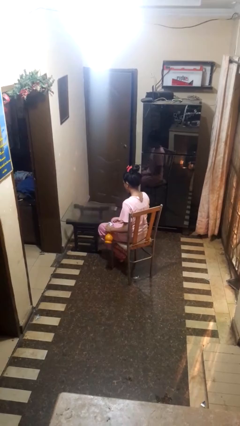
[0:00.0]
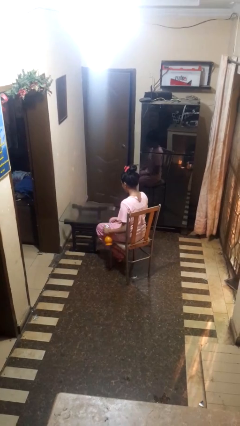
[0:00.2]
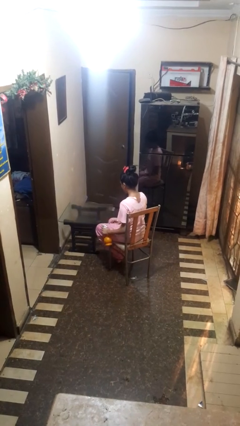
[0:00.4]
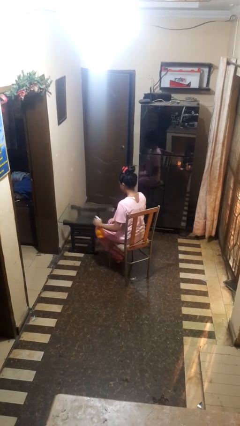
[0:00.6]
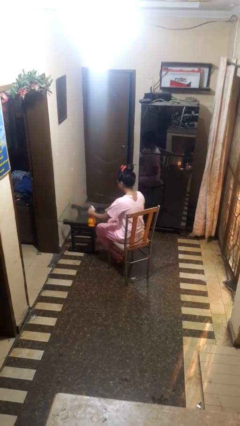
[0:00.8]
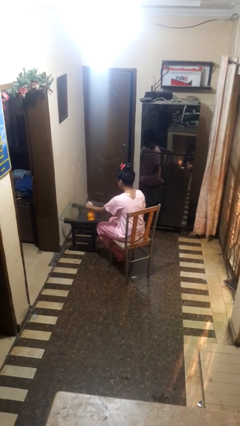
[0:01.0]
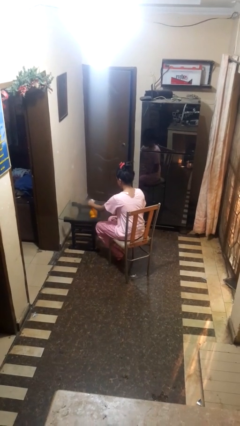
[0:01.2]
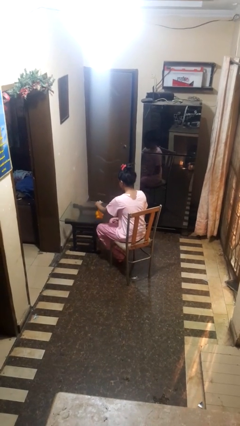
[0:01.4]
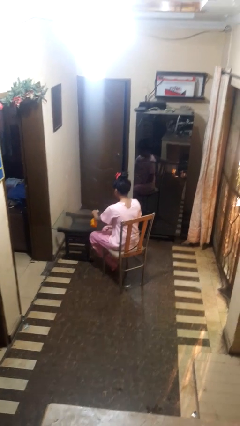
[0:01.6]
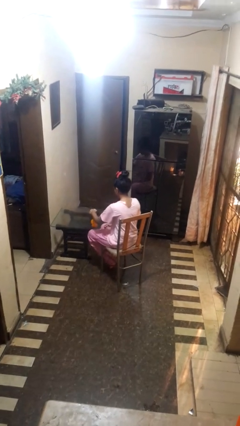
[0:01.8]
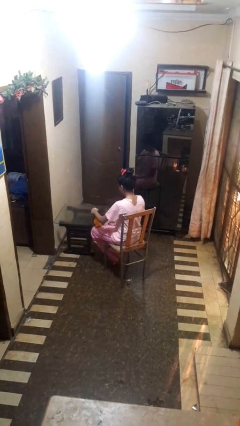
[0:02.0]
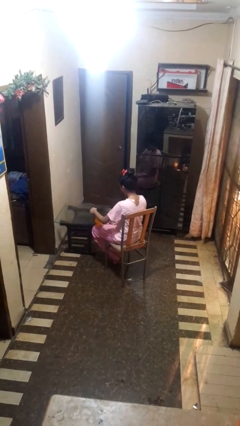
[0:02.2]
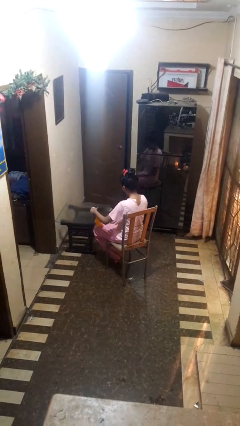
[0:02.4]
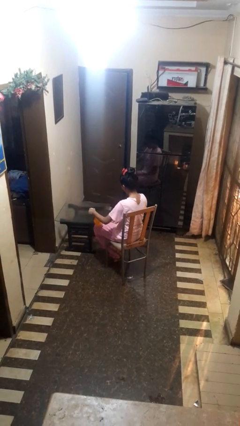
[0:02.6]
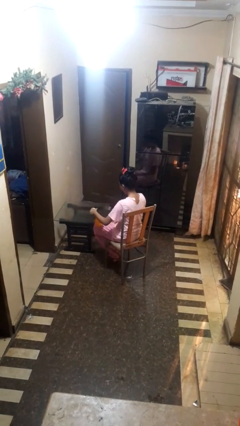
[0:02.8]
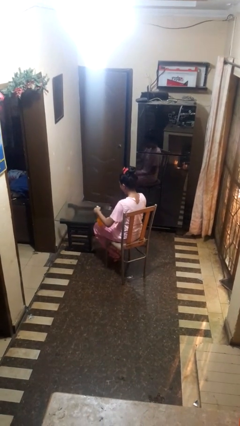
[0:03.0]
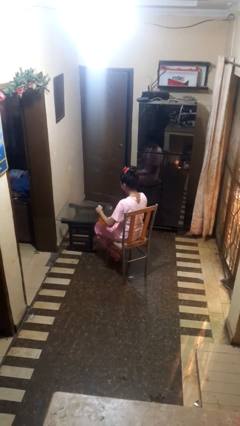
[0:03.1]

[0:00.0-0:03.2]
person sprays from bottle

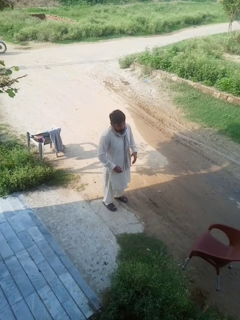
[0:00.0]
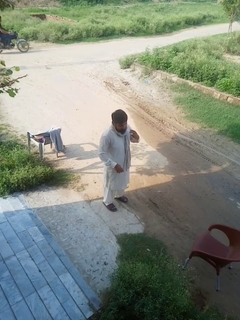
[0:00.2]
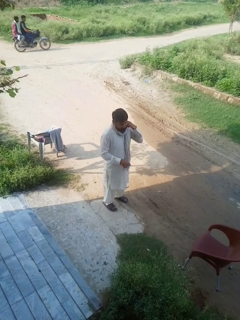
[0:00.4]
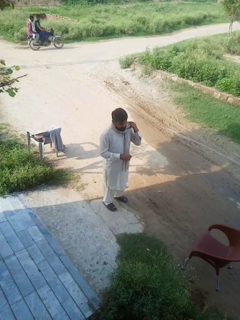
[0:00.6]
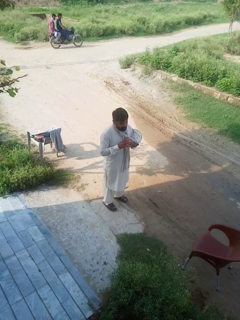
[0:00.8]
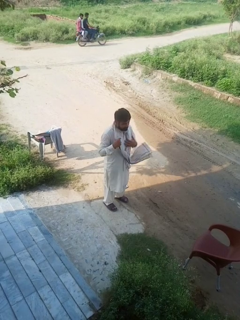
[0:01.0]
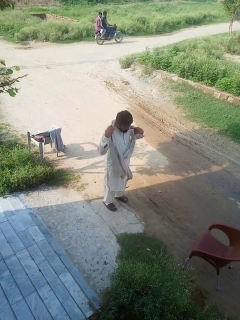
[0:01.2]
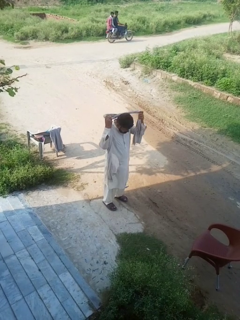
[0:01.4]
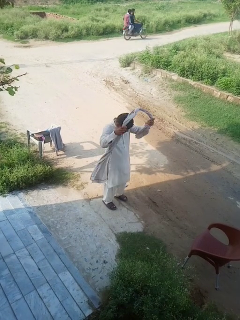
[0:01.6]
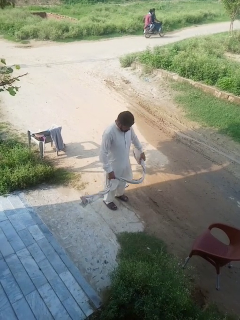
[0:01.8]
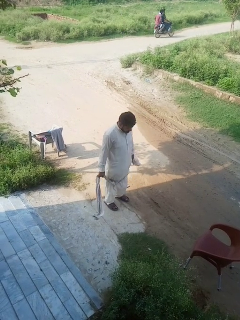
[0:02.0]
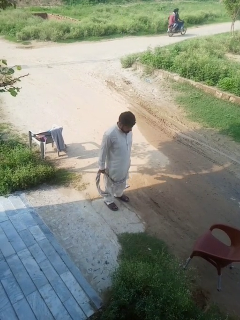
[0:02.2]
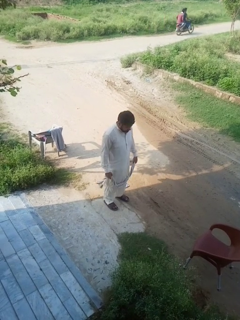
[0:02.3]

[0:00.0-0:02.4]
person takes off scarf

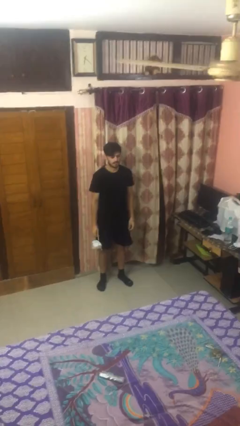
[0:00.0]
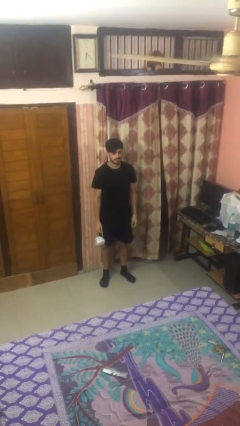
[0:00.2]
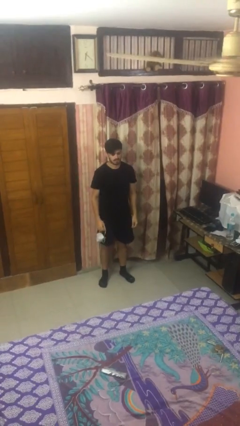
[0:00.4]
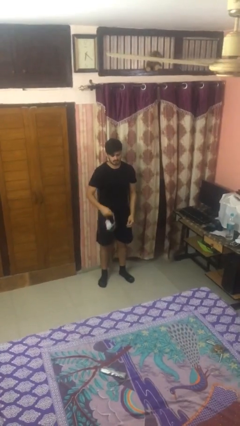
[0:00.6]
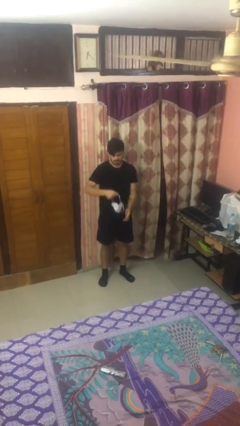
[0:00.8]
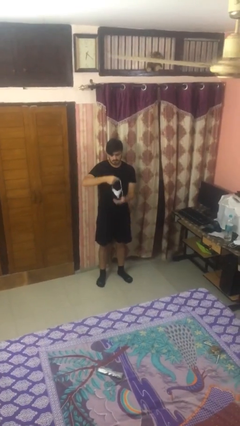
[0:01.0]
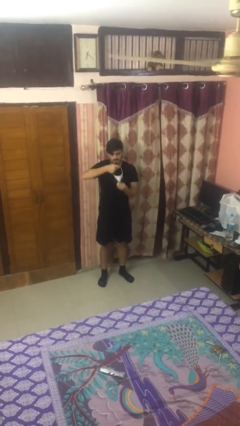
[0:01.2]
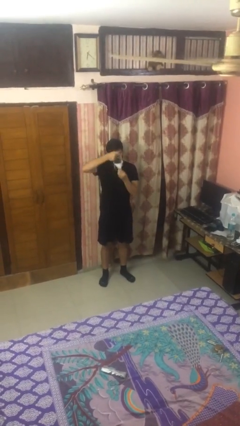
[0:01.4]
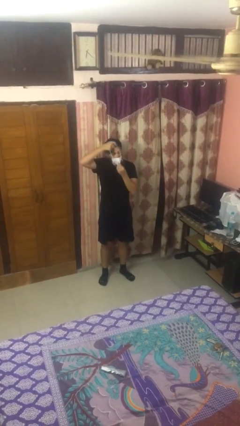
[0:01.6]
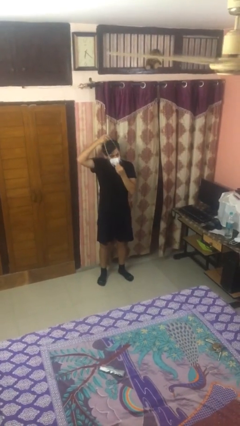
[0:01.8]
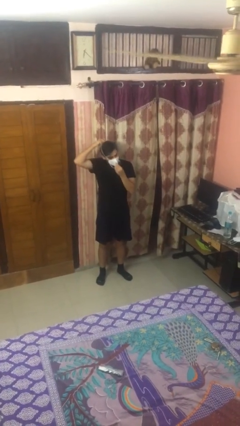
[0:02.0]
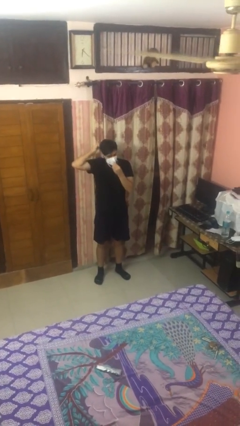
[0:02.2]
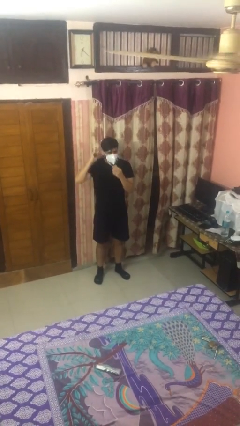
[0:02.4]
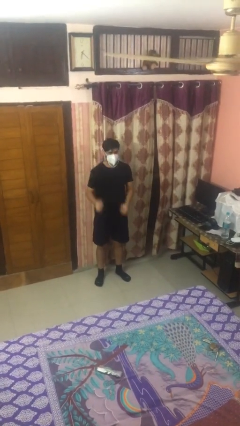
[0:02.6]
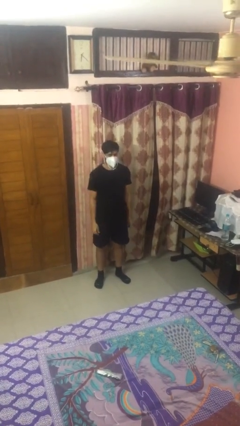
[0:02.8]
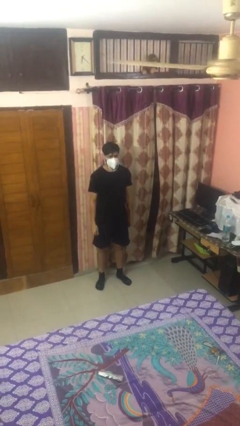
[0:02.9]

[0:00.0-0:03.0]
person puts on facemask

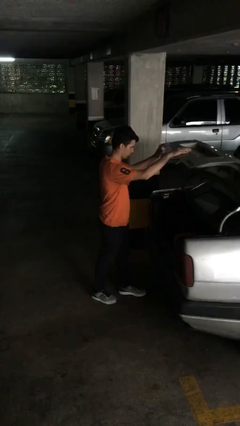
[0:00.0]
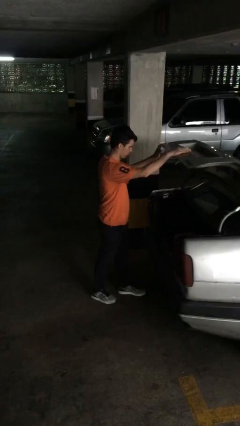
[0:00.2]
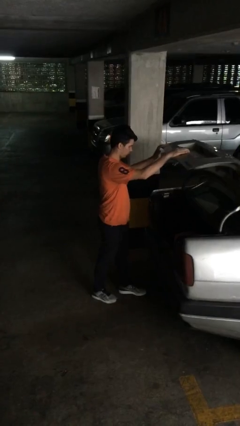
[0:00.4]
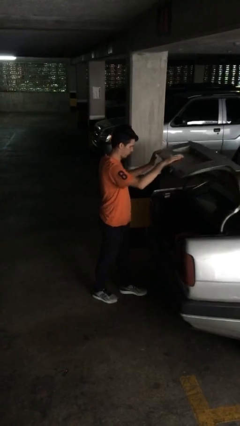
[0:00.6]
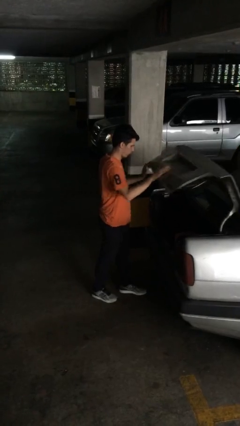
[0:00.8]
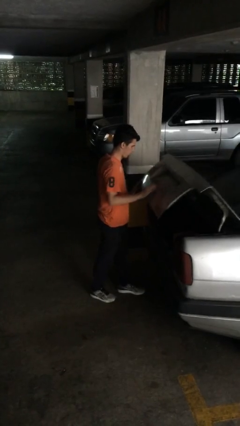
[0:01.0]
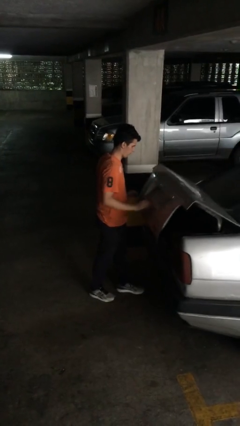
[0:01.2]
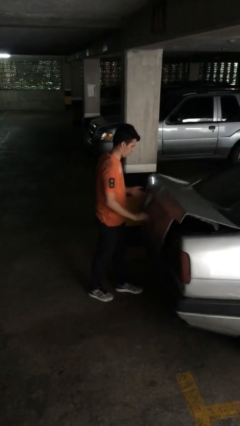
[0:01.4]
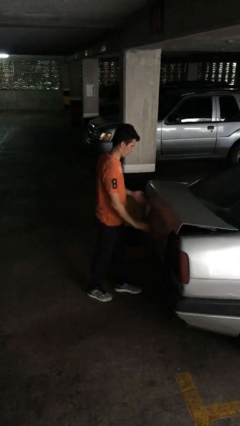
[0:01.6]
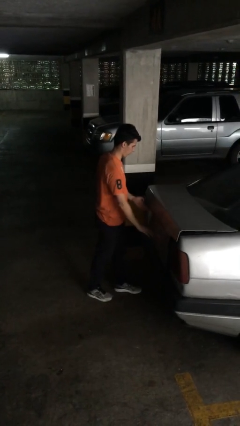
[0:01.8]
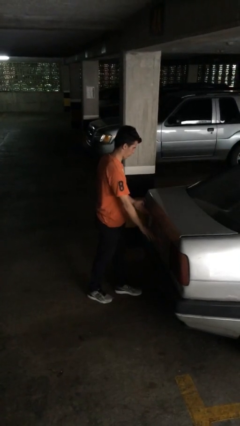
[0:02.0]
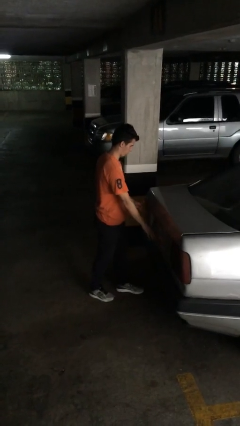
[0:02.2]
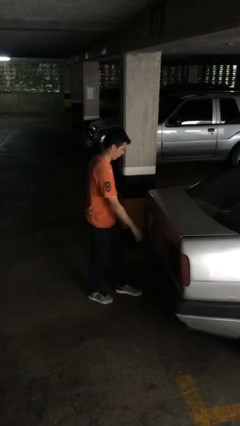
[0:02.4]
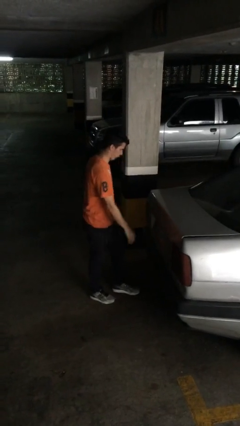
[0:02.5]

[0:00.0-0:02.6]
person closes car trunk

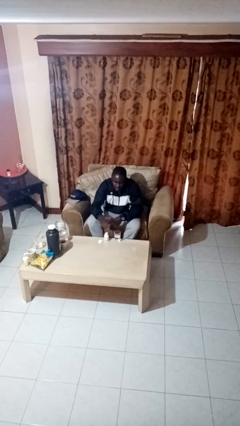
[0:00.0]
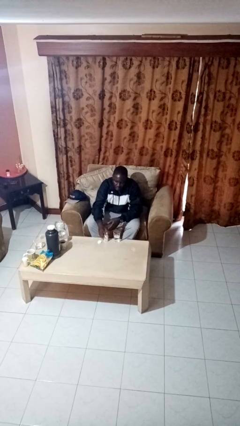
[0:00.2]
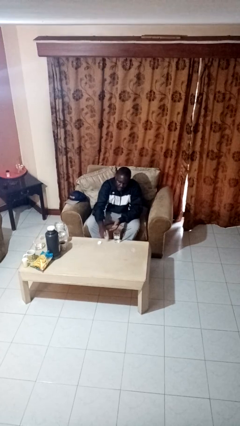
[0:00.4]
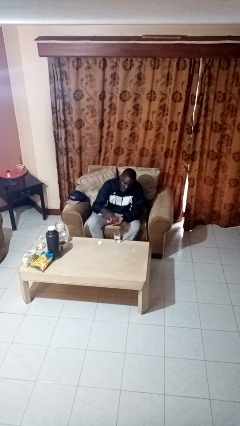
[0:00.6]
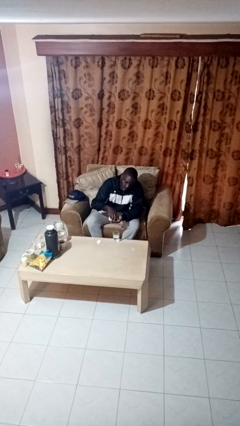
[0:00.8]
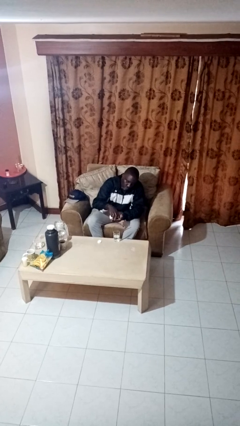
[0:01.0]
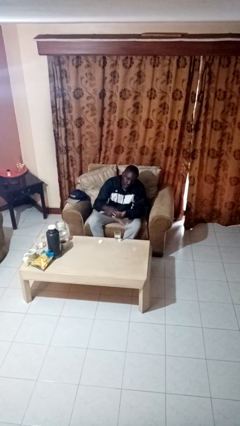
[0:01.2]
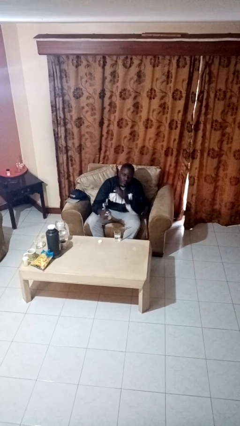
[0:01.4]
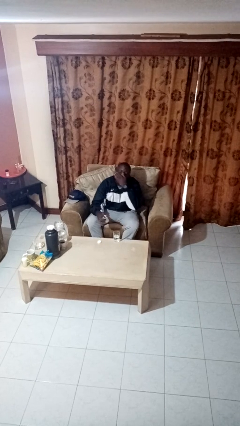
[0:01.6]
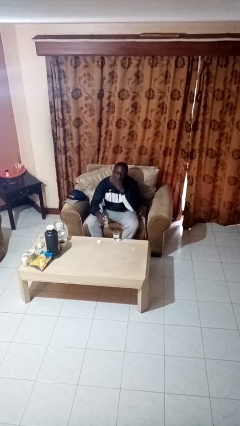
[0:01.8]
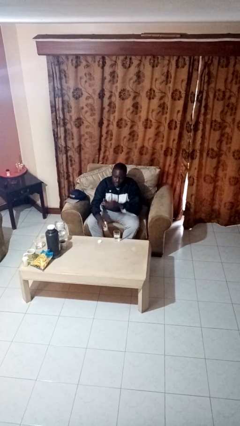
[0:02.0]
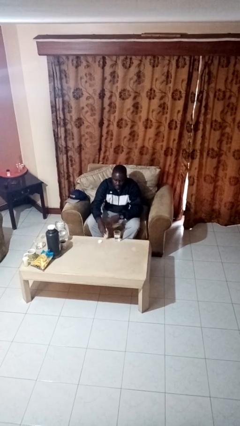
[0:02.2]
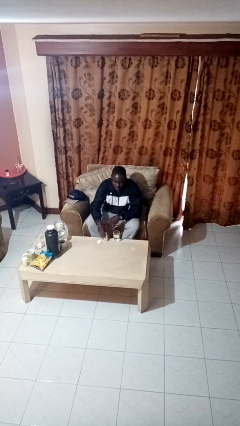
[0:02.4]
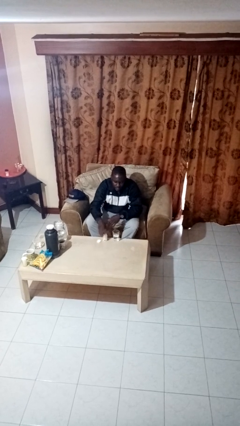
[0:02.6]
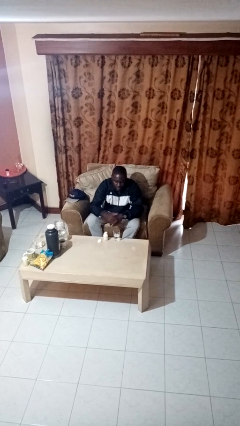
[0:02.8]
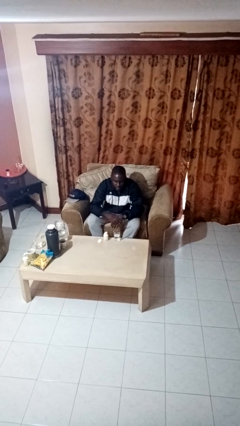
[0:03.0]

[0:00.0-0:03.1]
person takes medicine pills

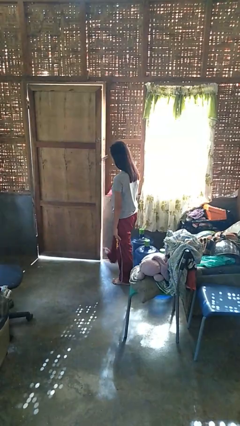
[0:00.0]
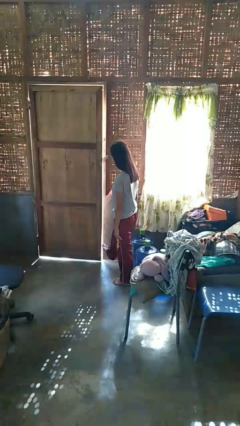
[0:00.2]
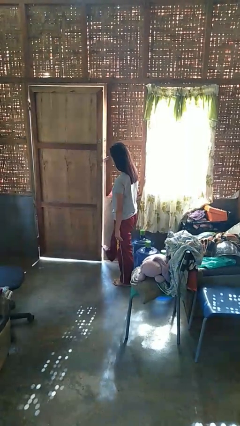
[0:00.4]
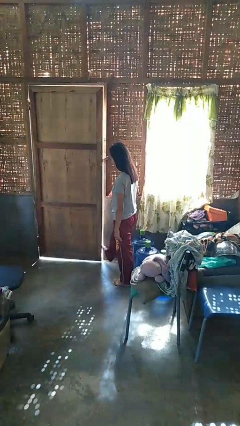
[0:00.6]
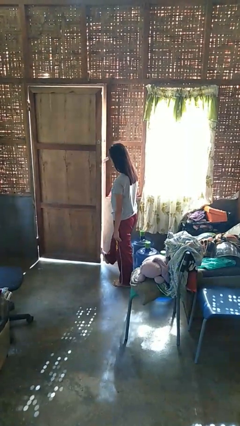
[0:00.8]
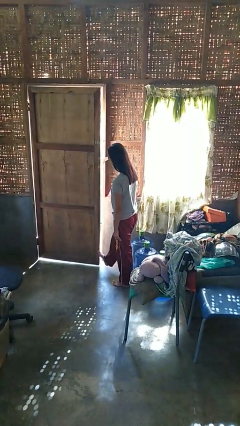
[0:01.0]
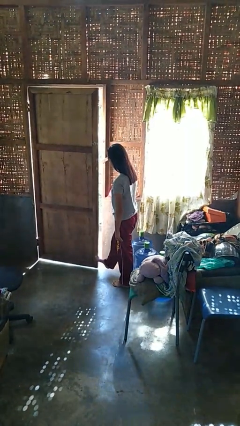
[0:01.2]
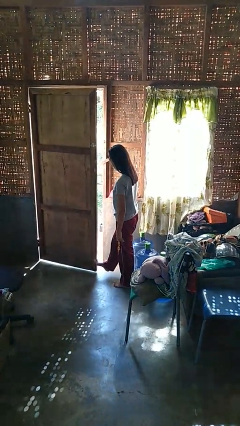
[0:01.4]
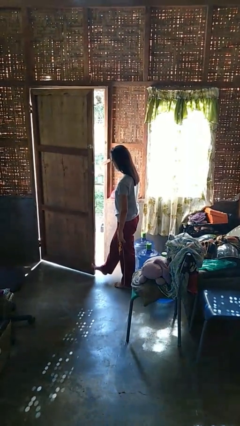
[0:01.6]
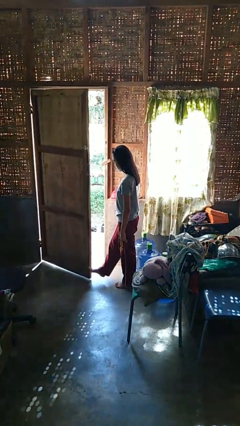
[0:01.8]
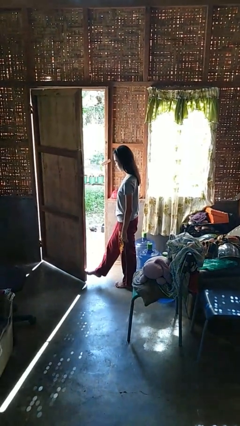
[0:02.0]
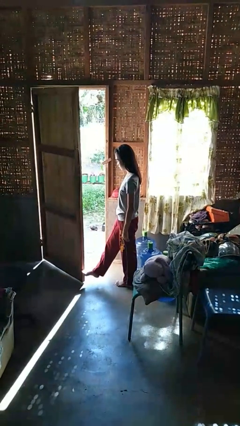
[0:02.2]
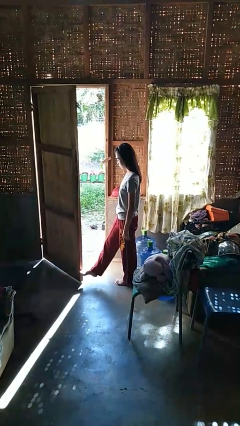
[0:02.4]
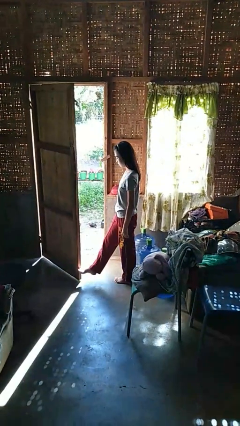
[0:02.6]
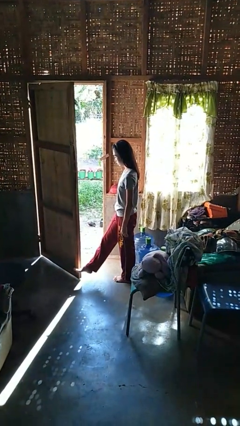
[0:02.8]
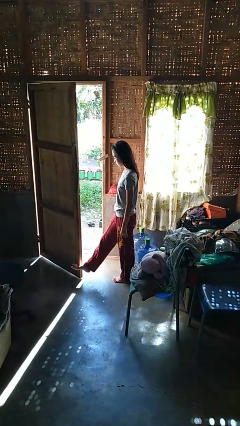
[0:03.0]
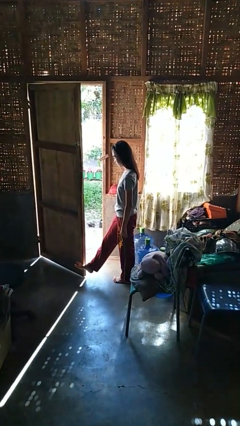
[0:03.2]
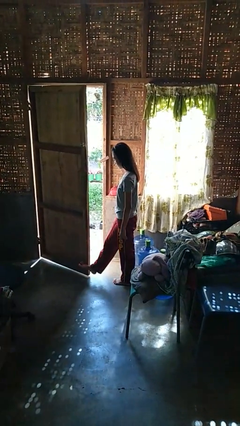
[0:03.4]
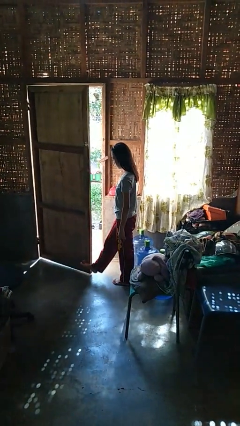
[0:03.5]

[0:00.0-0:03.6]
person opens facility door

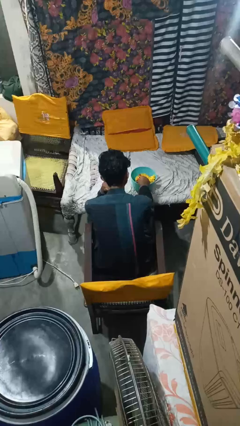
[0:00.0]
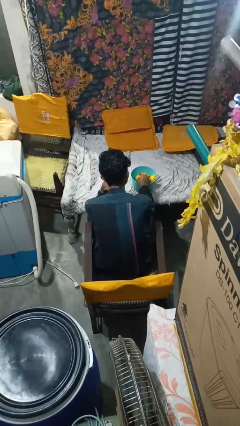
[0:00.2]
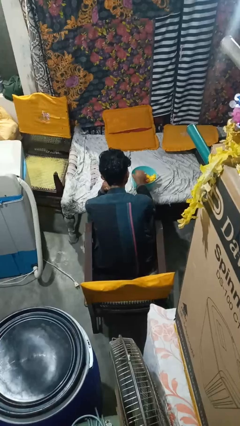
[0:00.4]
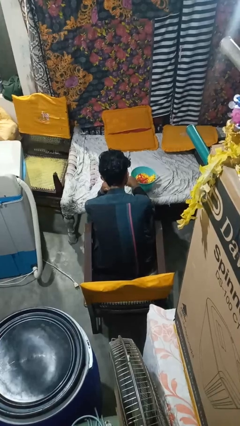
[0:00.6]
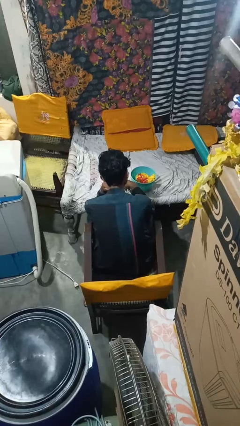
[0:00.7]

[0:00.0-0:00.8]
person pours into bowl
